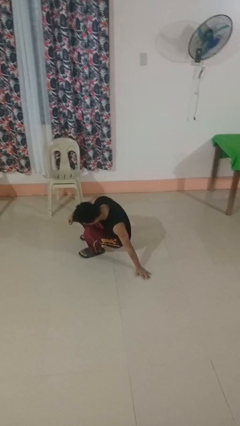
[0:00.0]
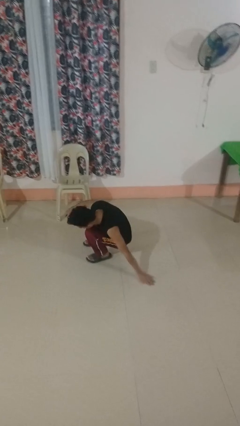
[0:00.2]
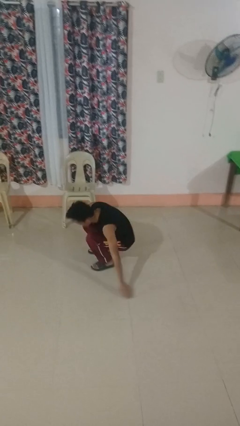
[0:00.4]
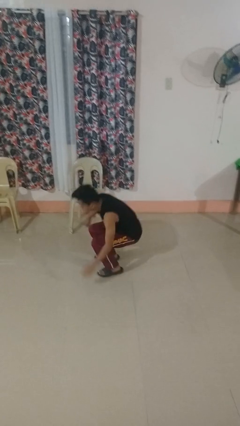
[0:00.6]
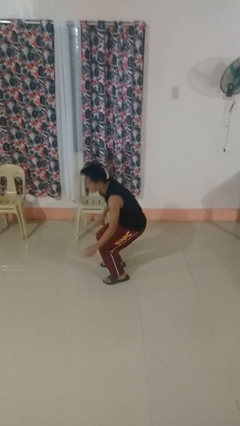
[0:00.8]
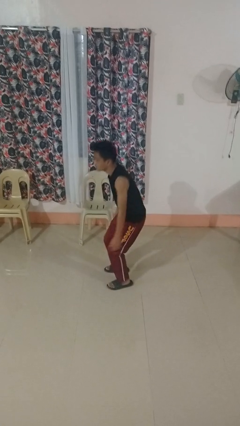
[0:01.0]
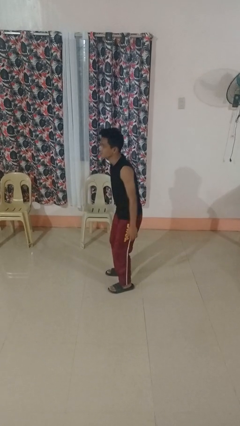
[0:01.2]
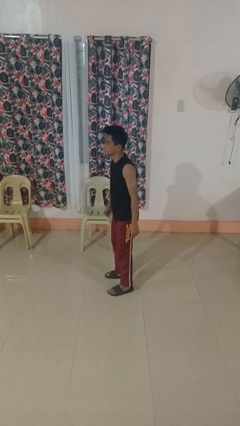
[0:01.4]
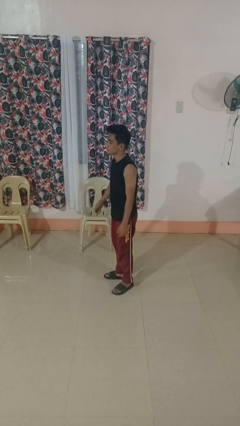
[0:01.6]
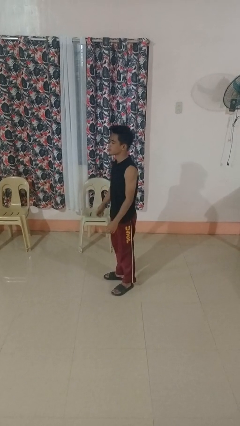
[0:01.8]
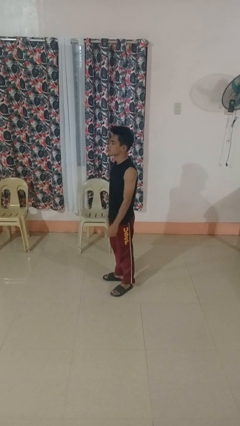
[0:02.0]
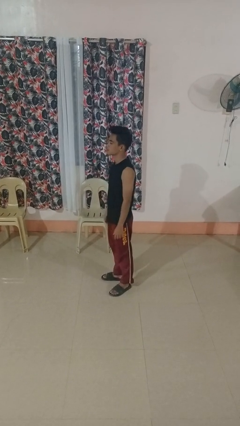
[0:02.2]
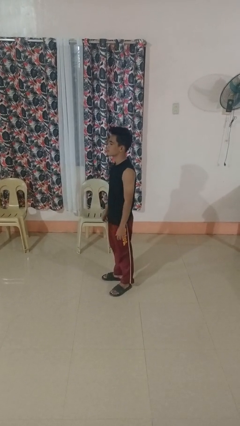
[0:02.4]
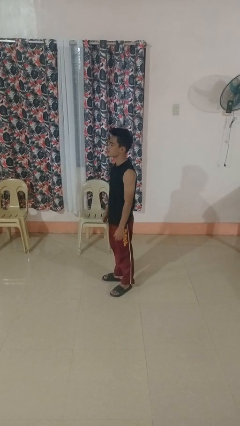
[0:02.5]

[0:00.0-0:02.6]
person stands up from floor

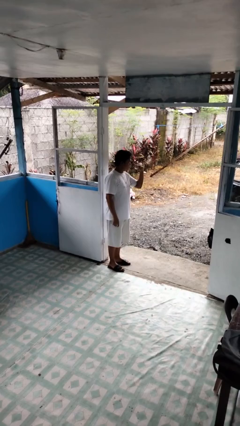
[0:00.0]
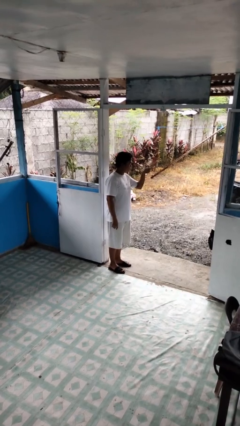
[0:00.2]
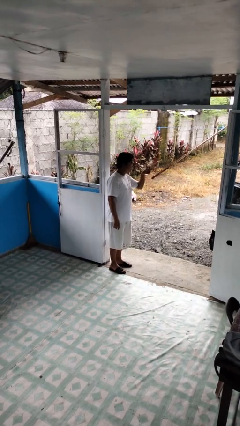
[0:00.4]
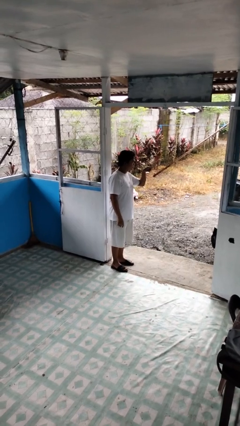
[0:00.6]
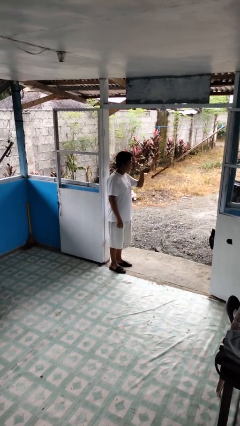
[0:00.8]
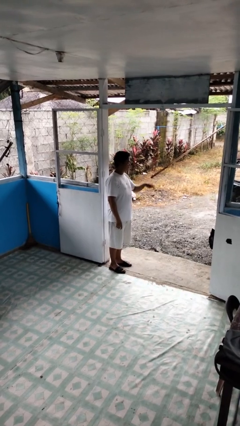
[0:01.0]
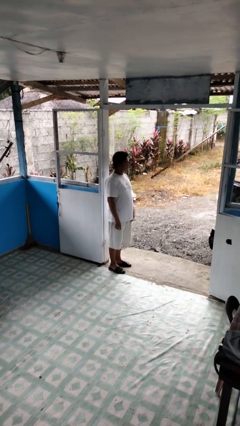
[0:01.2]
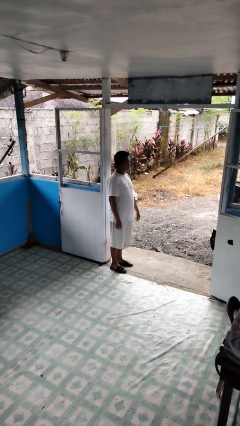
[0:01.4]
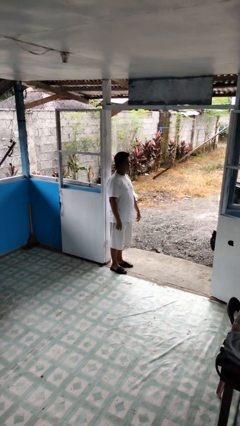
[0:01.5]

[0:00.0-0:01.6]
person gestures watch closely

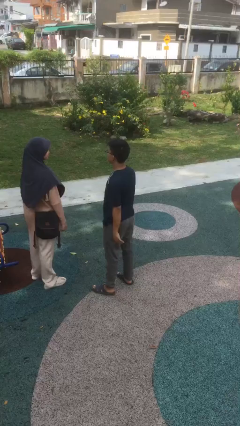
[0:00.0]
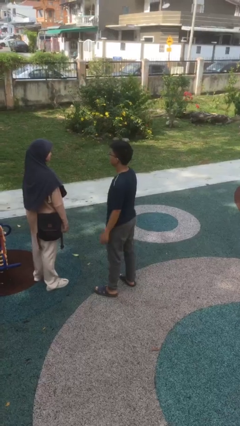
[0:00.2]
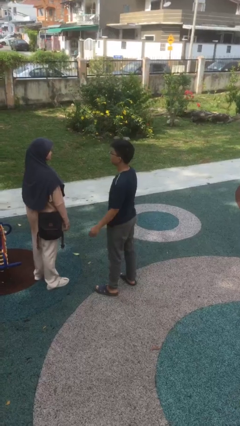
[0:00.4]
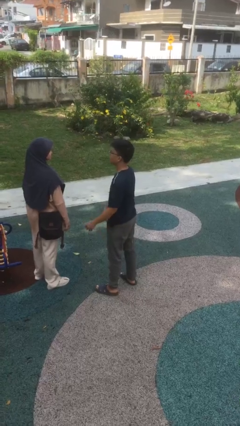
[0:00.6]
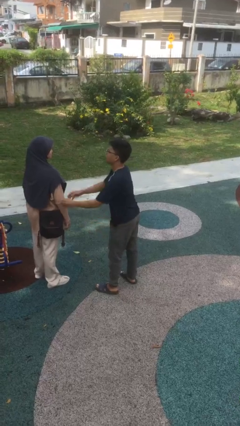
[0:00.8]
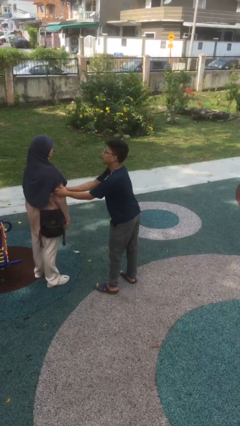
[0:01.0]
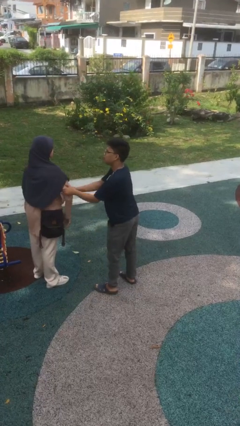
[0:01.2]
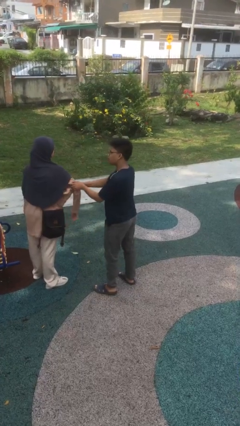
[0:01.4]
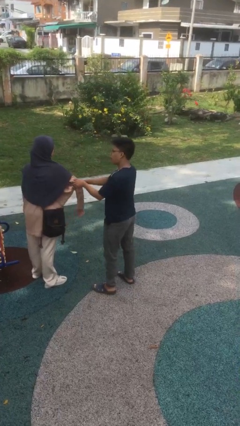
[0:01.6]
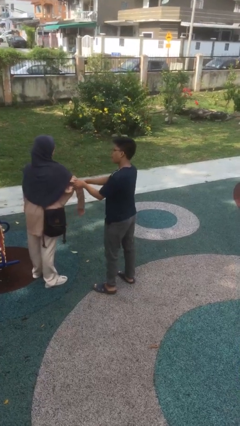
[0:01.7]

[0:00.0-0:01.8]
person grabs person by bicep

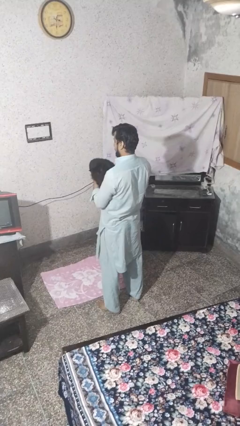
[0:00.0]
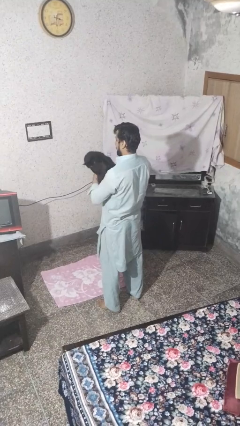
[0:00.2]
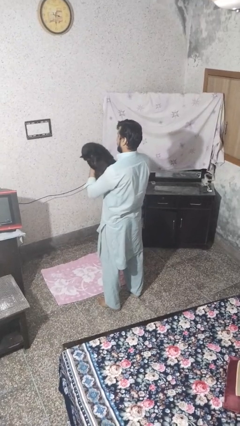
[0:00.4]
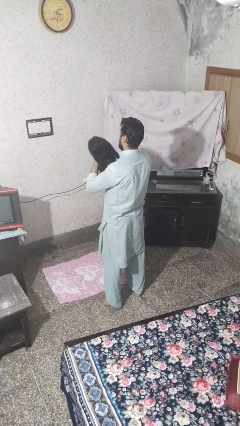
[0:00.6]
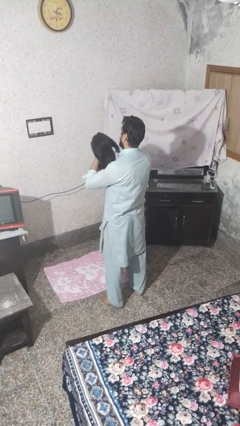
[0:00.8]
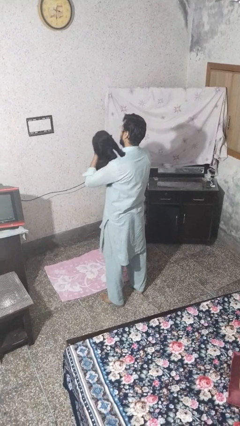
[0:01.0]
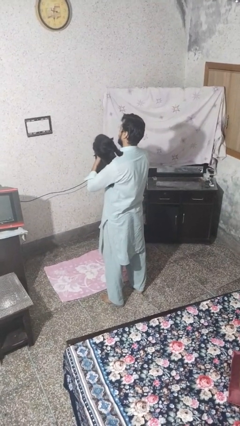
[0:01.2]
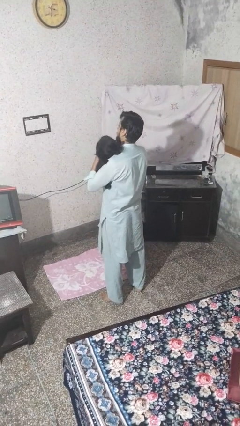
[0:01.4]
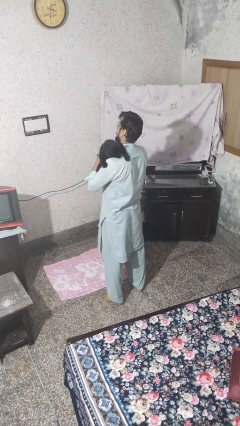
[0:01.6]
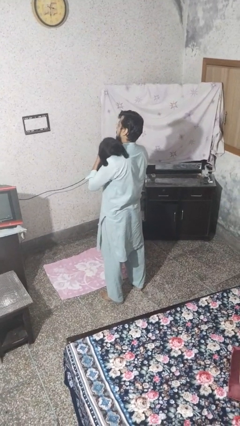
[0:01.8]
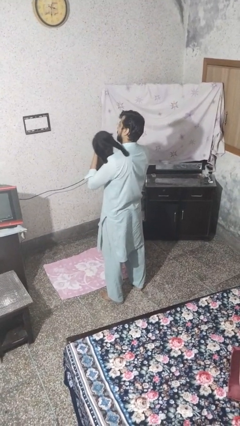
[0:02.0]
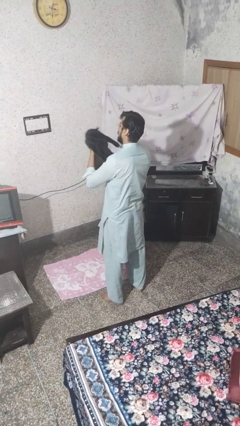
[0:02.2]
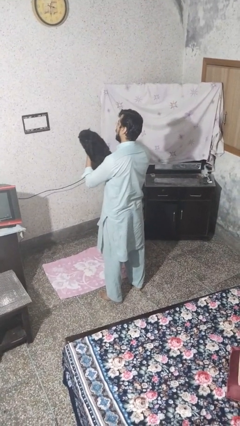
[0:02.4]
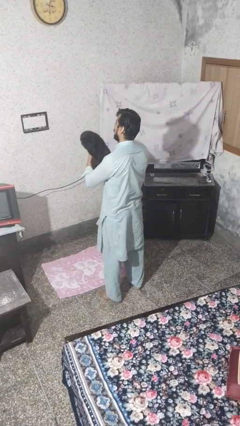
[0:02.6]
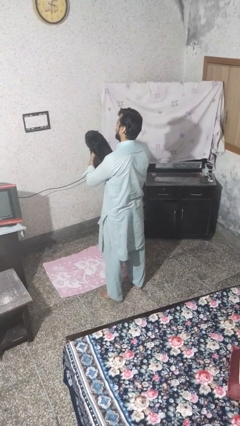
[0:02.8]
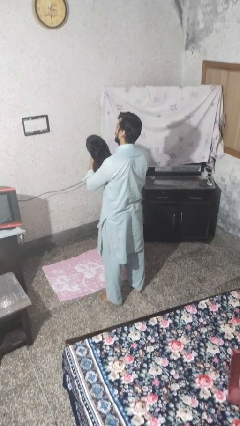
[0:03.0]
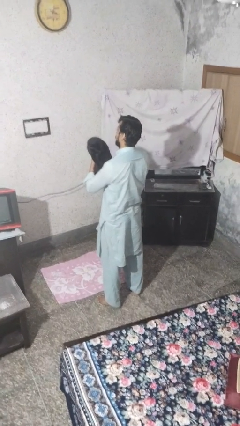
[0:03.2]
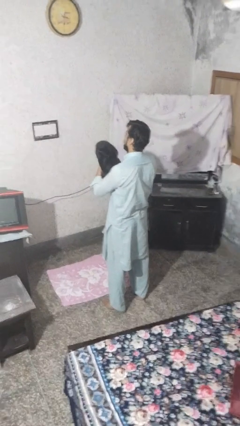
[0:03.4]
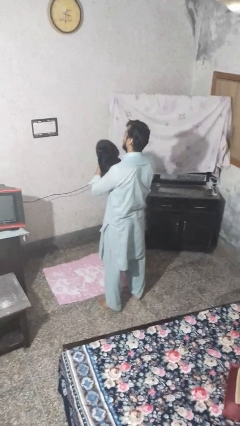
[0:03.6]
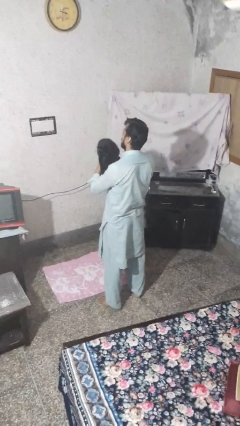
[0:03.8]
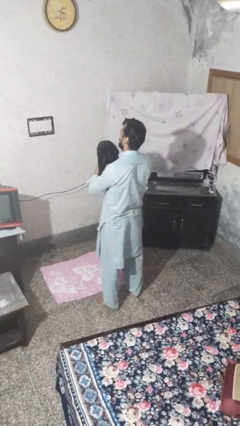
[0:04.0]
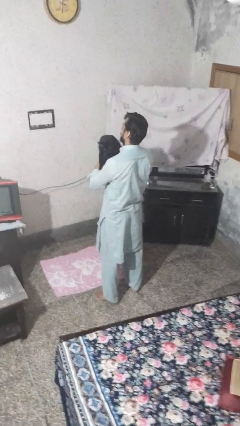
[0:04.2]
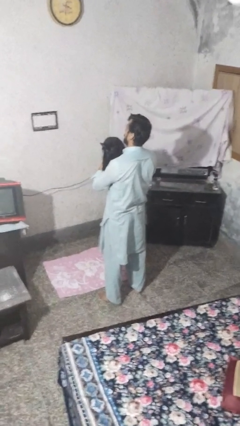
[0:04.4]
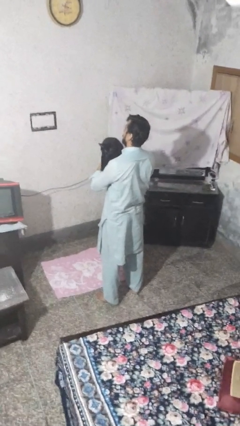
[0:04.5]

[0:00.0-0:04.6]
person hugs cat

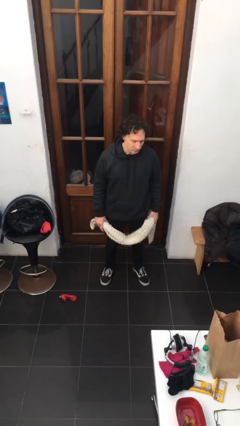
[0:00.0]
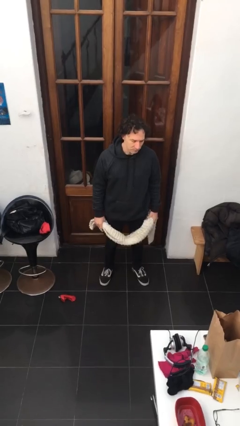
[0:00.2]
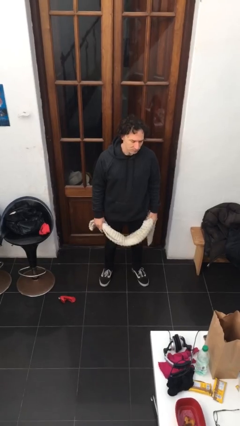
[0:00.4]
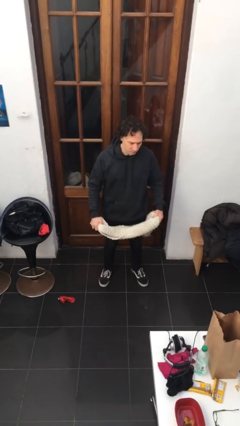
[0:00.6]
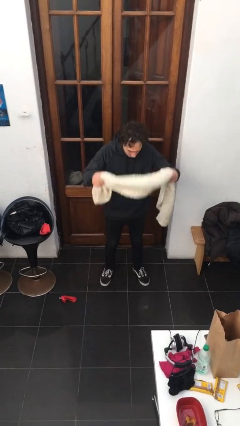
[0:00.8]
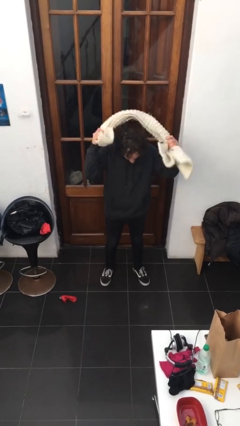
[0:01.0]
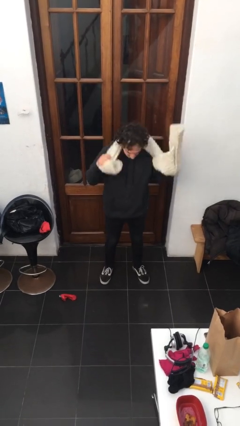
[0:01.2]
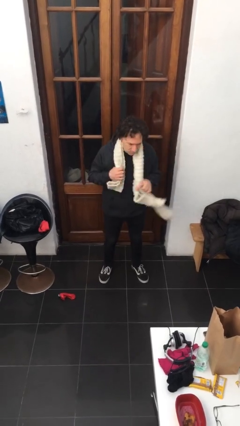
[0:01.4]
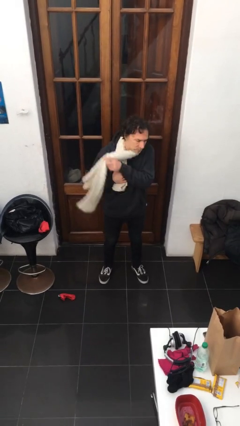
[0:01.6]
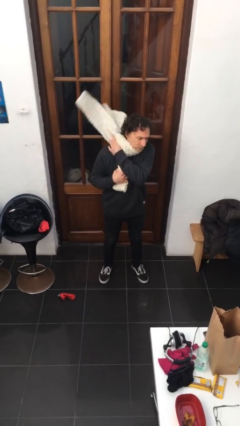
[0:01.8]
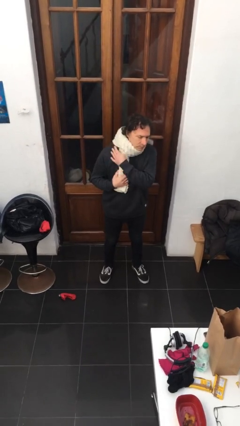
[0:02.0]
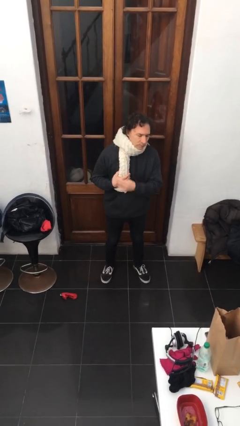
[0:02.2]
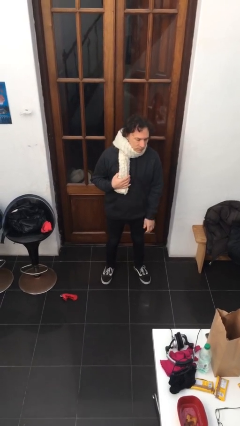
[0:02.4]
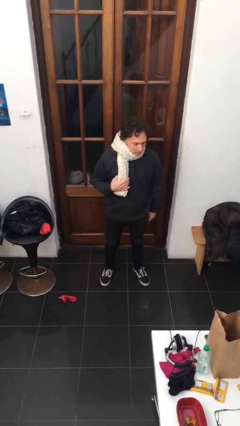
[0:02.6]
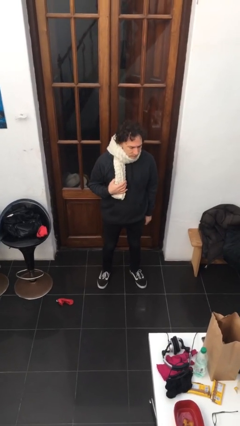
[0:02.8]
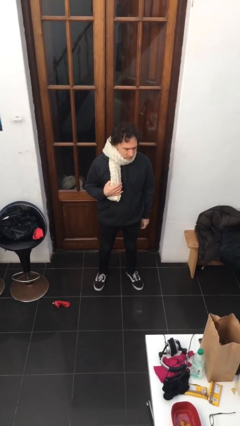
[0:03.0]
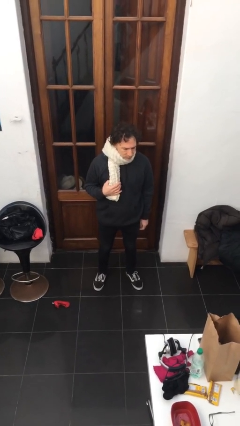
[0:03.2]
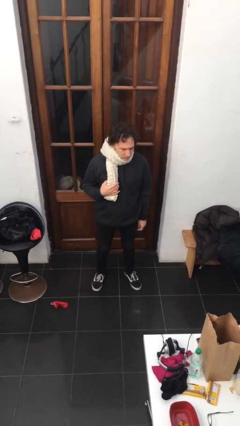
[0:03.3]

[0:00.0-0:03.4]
person puts on scarf

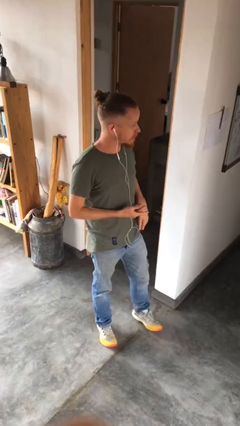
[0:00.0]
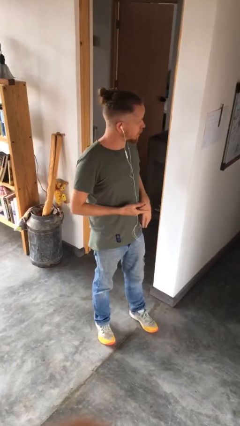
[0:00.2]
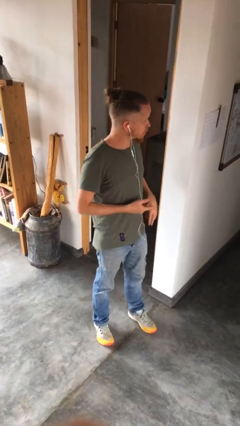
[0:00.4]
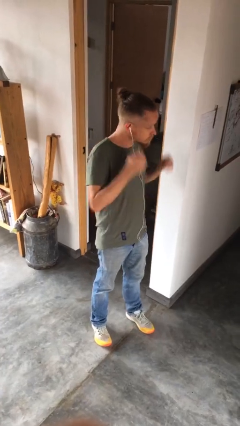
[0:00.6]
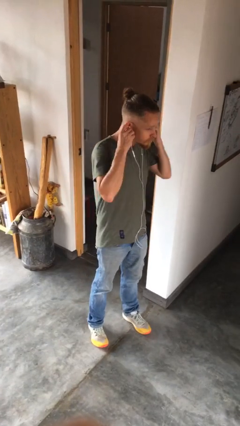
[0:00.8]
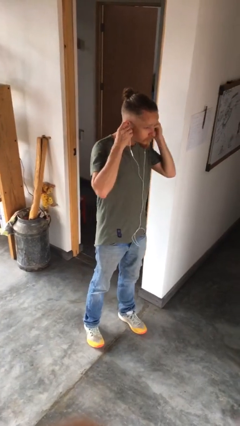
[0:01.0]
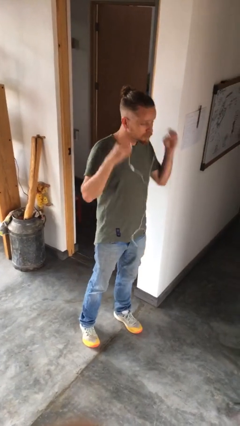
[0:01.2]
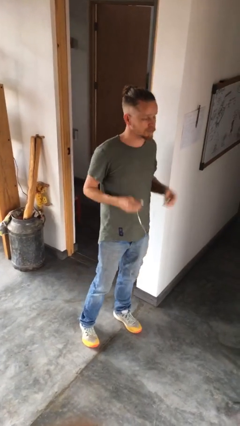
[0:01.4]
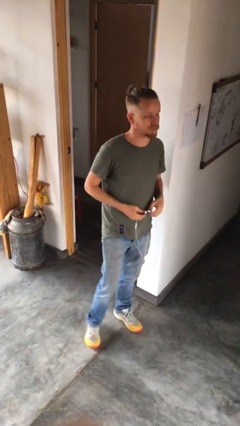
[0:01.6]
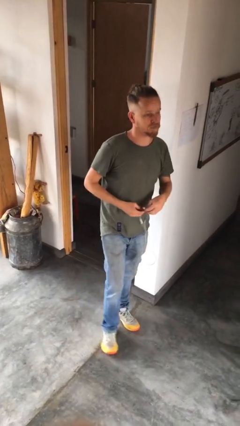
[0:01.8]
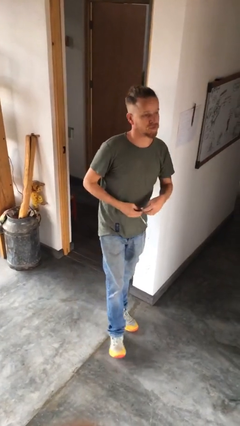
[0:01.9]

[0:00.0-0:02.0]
person takes off headphones

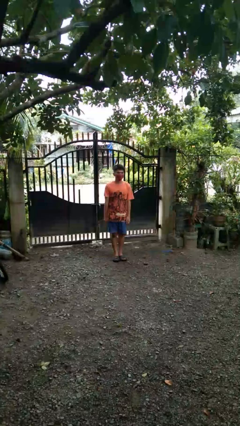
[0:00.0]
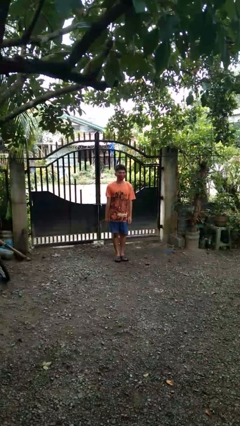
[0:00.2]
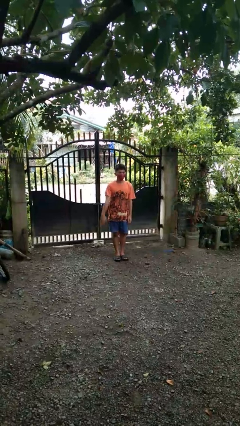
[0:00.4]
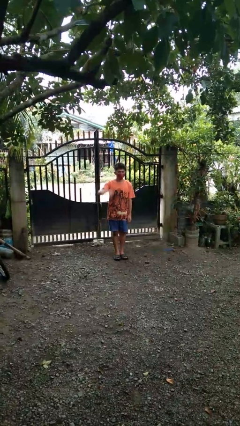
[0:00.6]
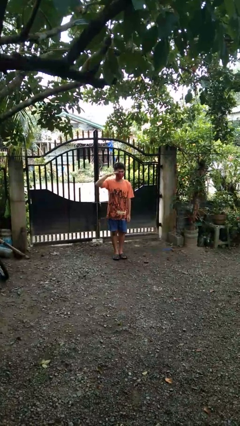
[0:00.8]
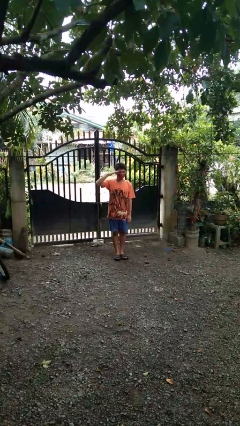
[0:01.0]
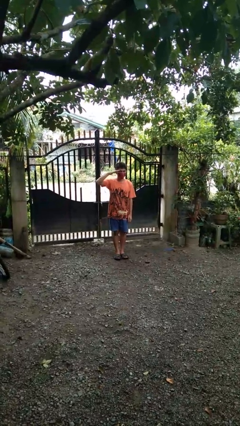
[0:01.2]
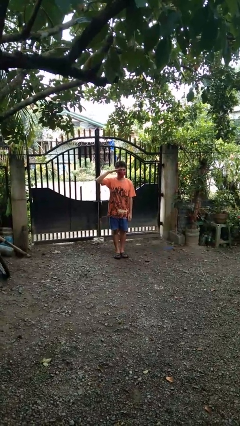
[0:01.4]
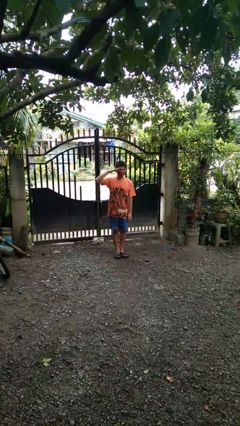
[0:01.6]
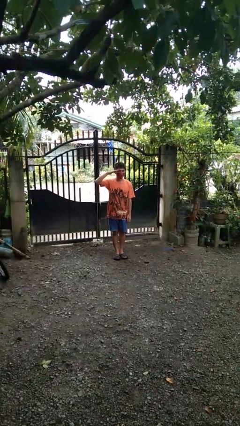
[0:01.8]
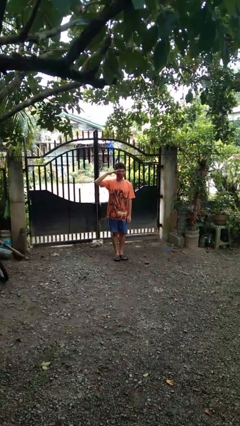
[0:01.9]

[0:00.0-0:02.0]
person salutes
